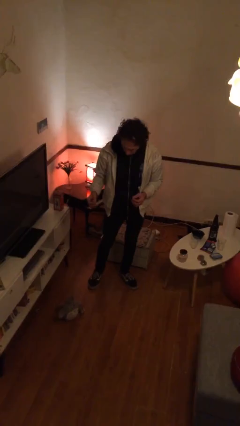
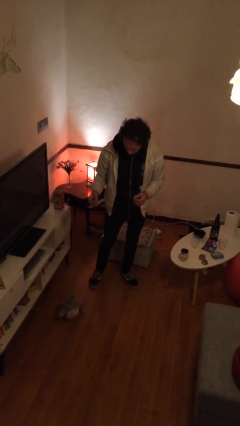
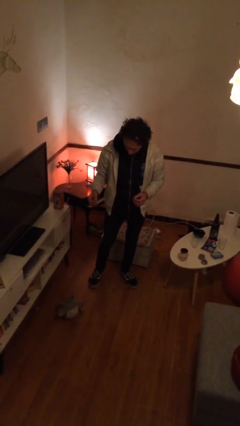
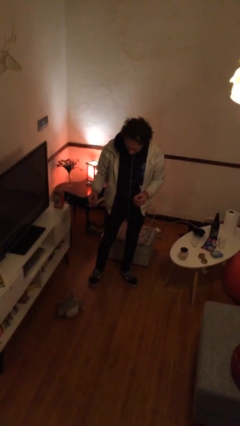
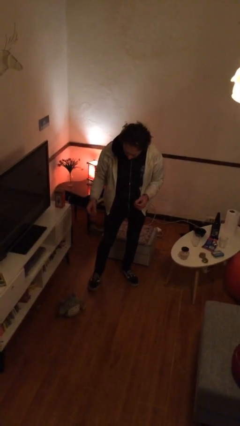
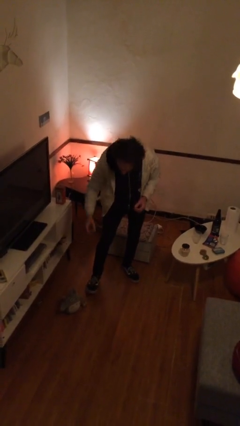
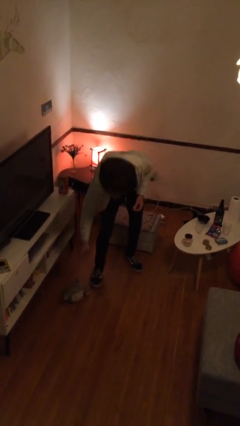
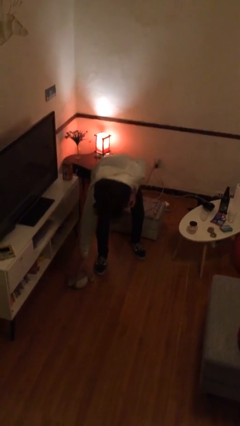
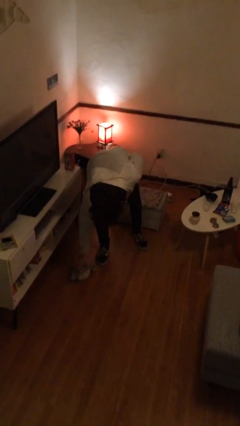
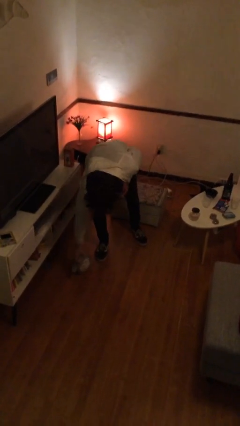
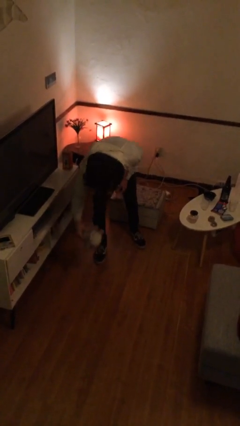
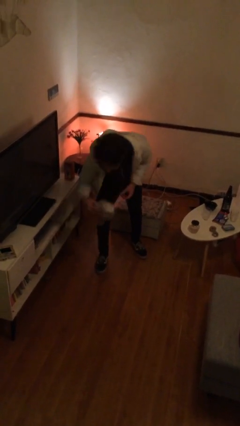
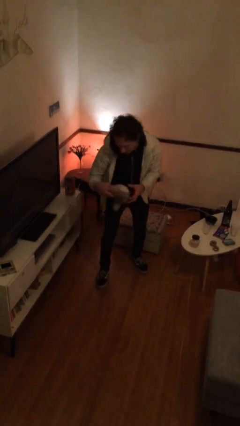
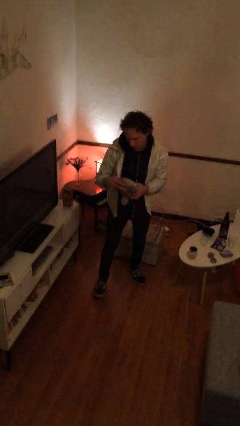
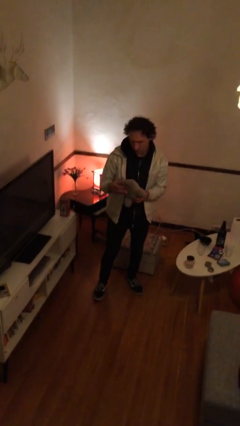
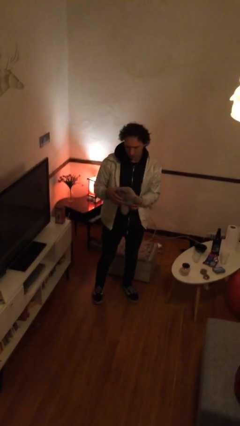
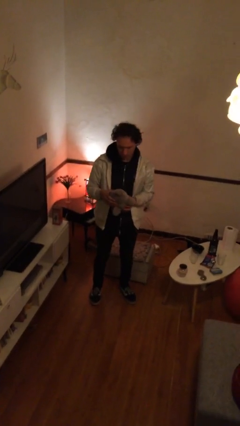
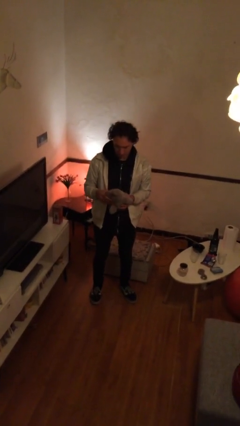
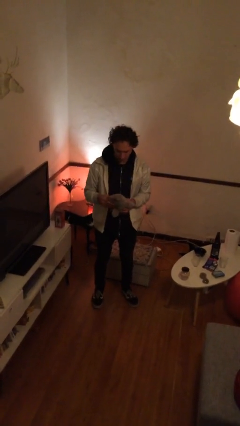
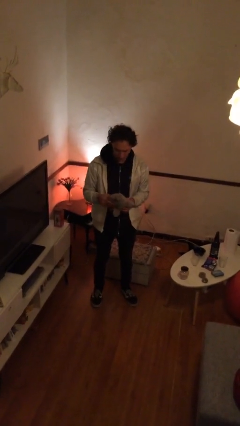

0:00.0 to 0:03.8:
person picks up object from floor

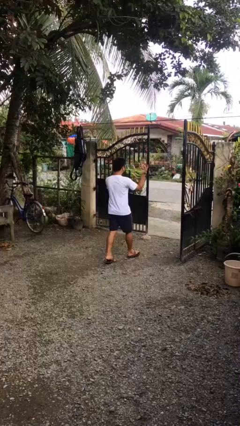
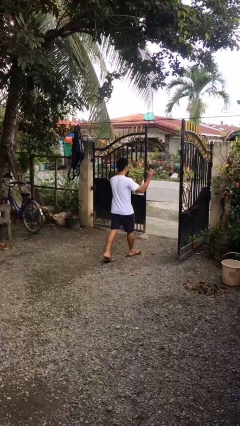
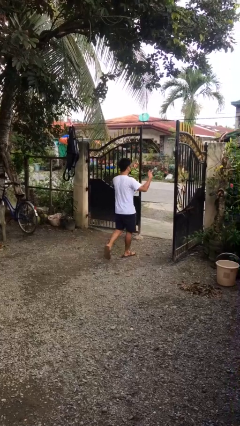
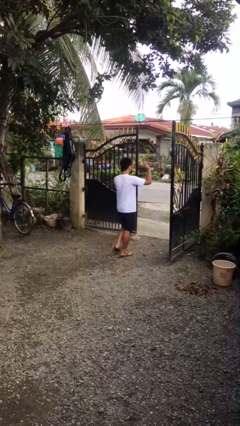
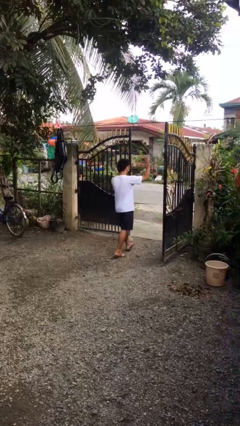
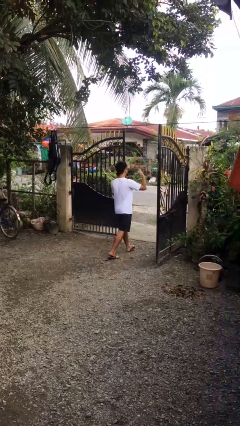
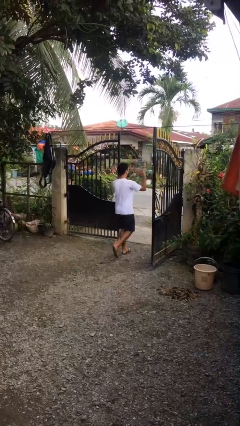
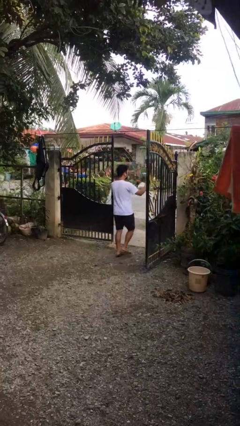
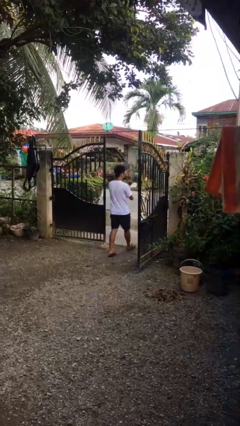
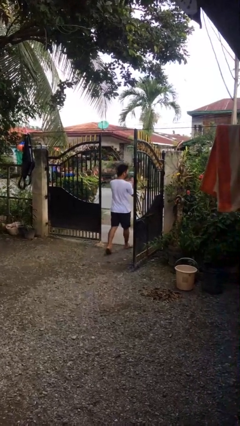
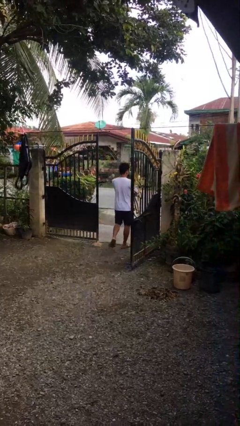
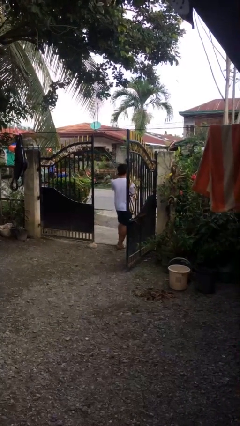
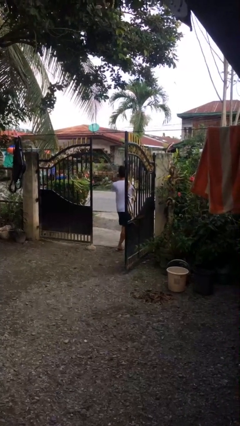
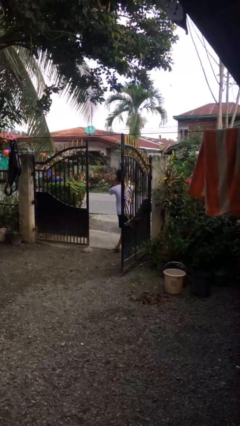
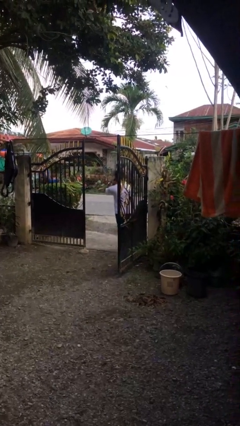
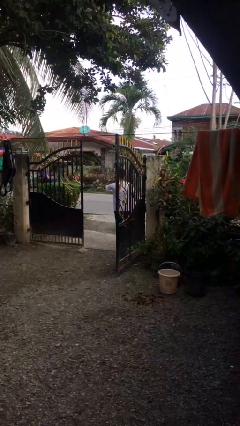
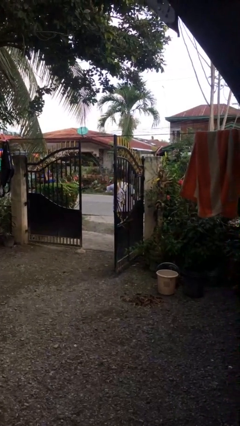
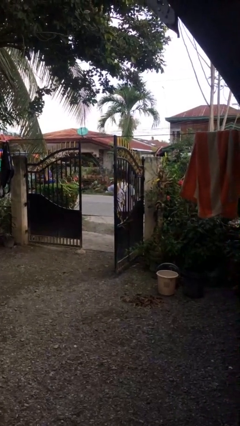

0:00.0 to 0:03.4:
person exits scene through structure

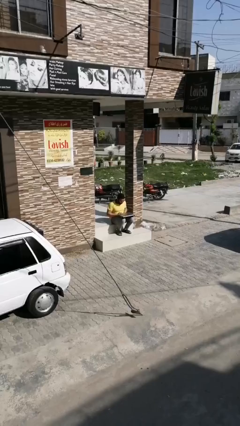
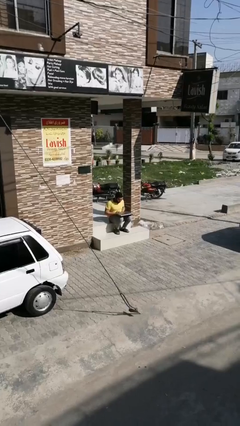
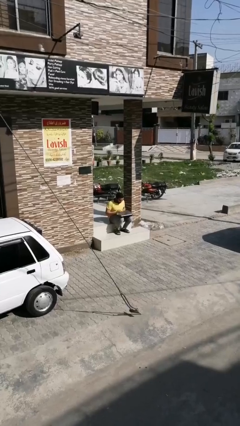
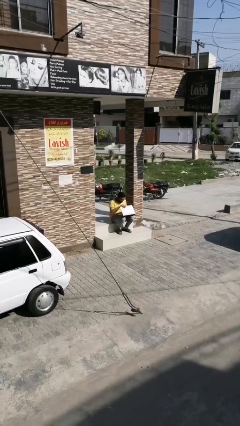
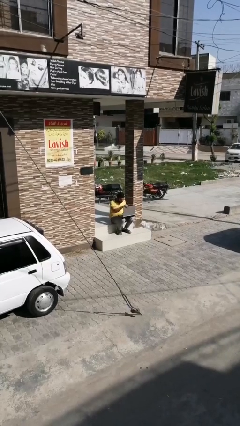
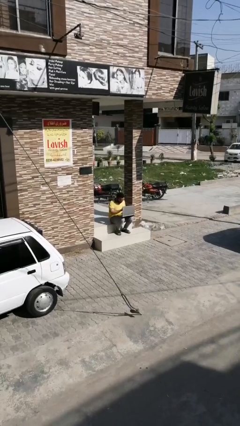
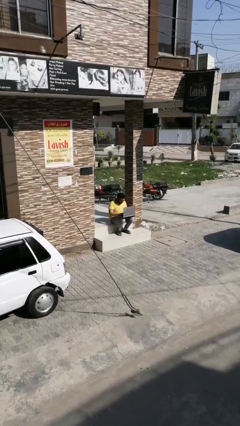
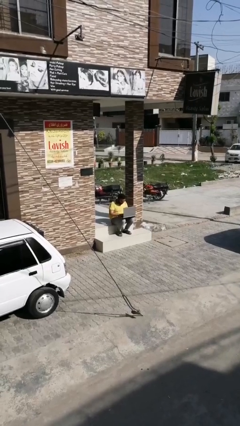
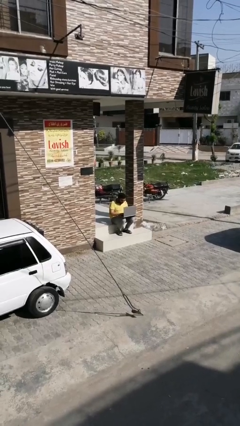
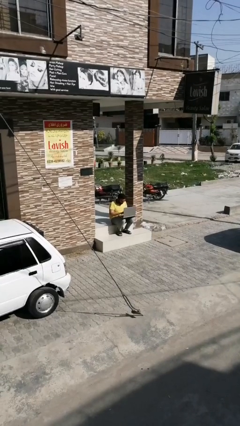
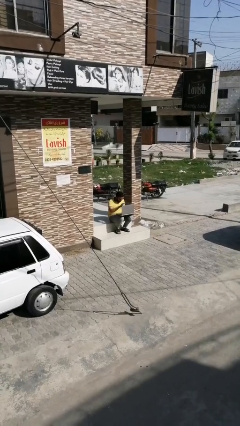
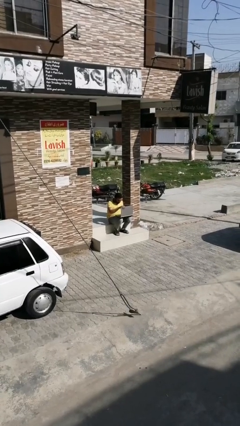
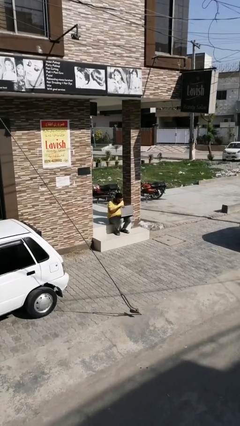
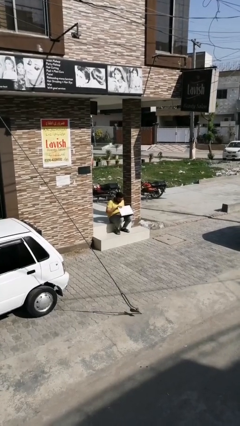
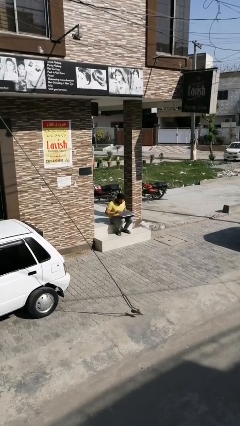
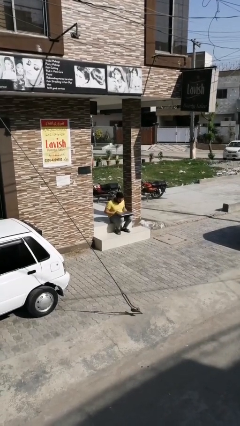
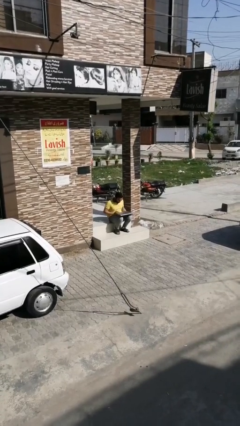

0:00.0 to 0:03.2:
person interacts with laptop

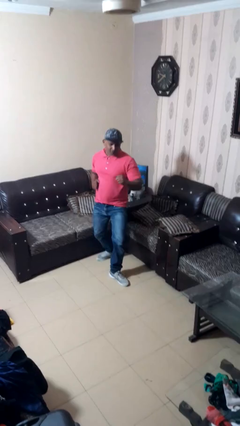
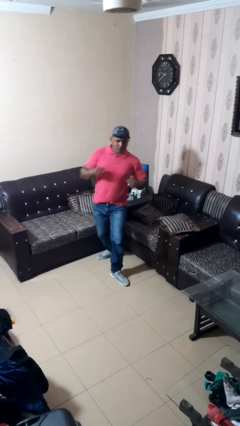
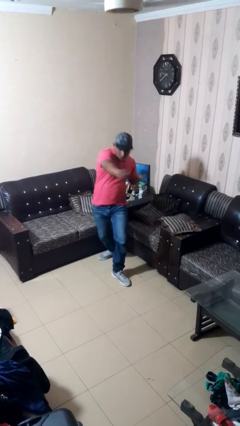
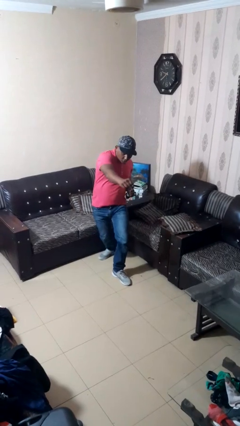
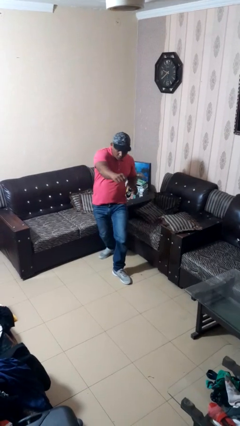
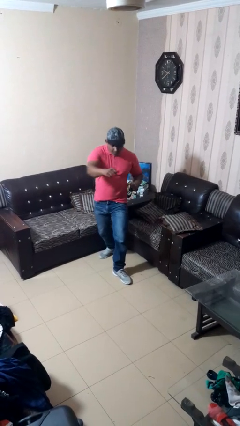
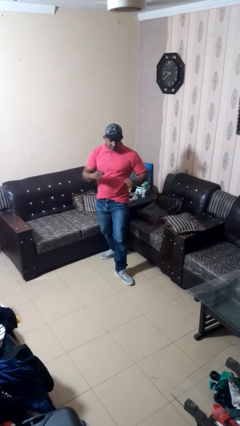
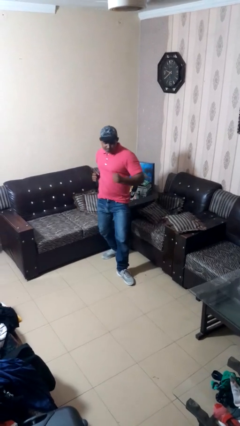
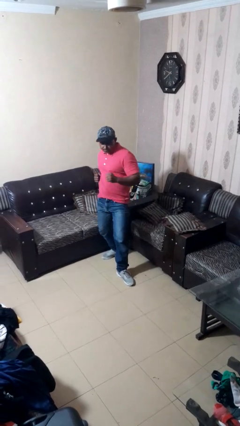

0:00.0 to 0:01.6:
person karate chop

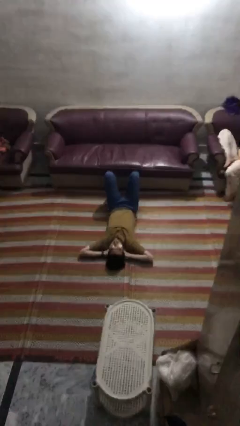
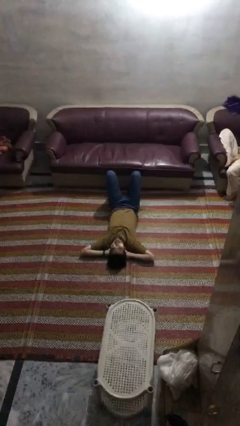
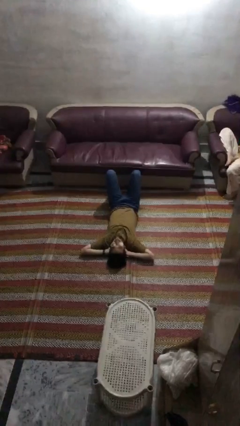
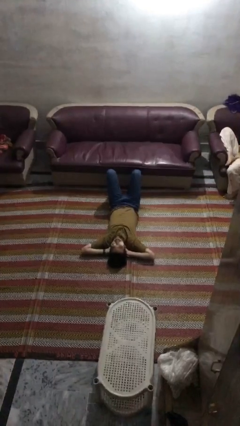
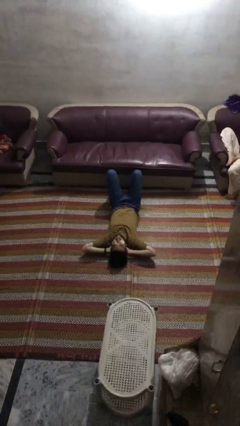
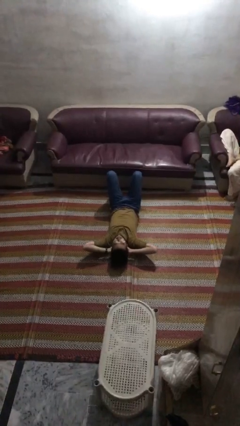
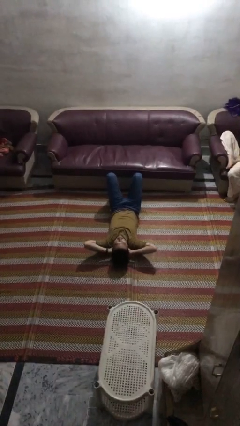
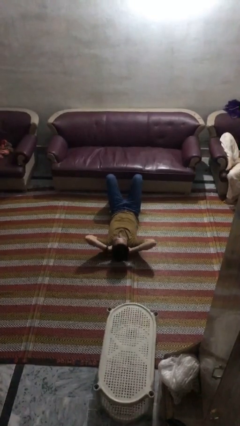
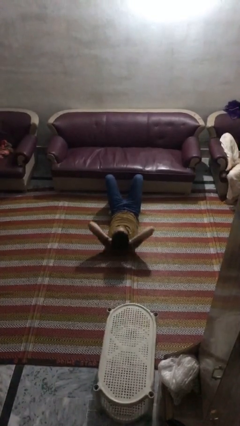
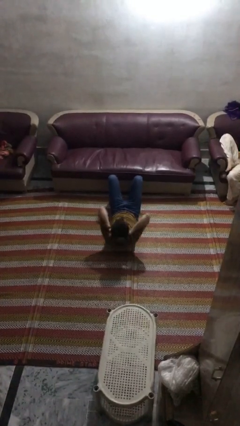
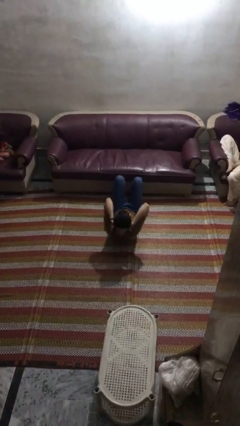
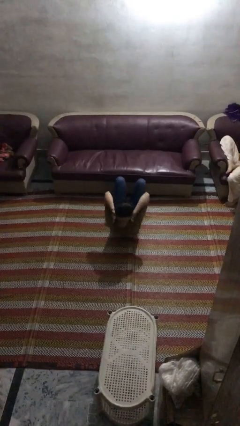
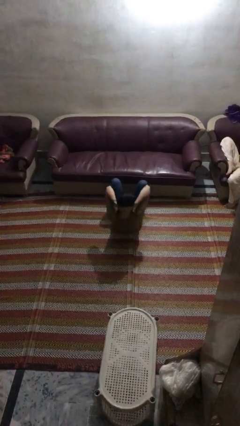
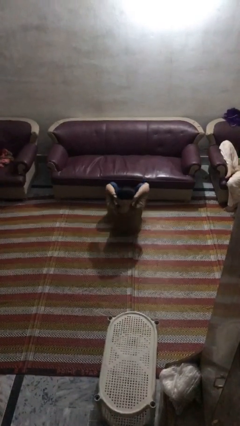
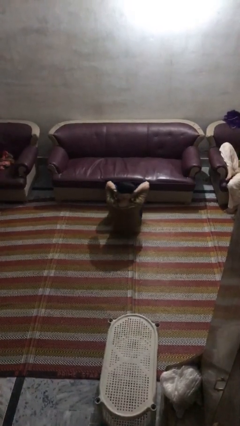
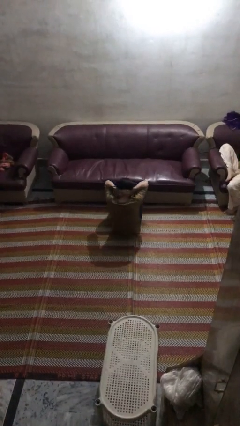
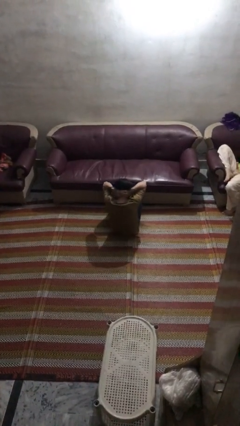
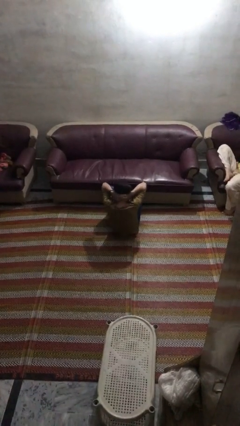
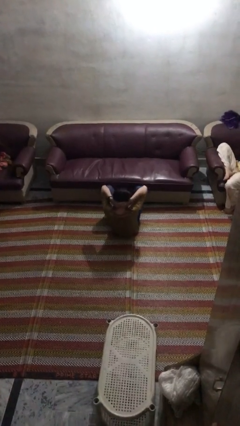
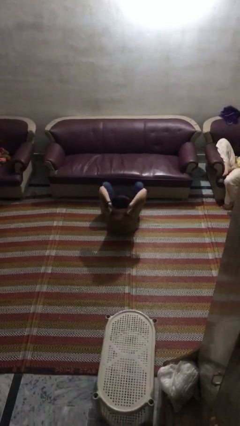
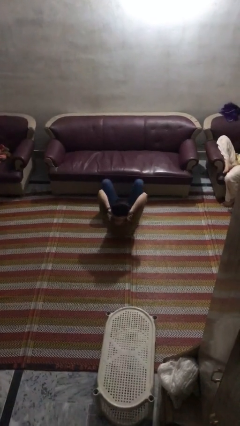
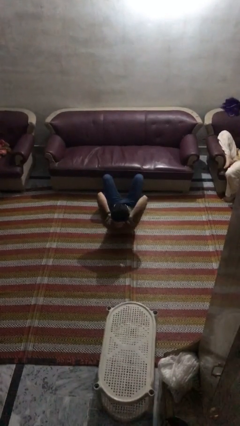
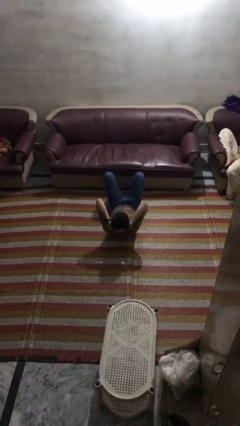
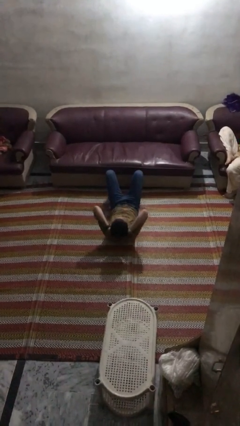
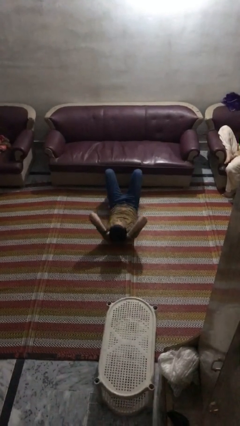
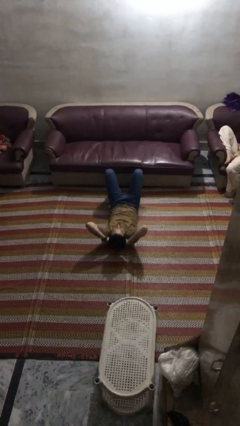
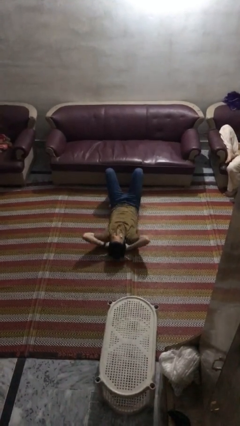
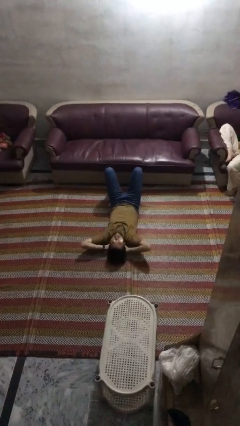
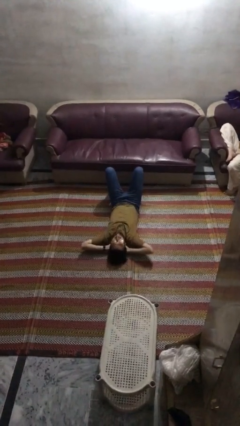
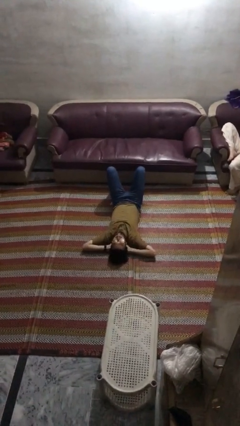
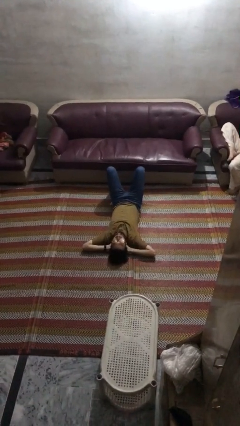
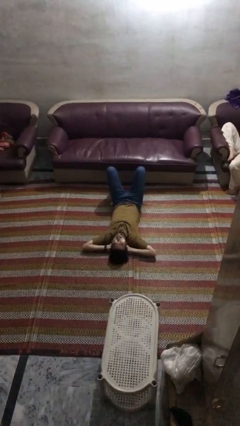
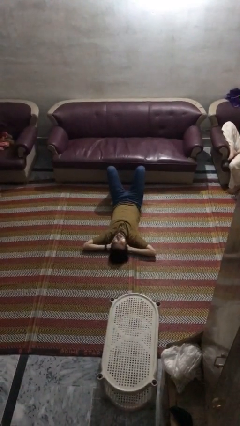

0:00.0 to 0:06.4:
person exercises with situp
